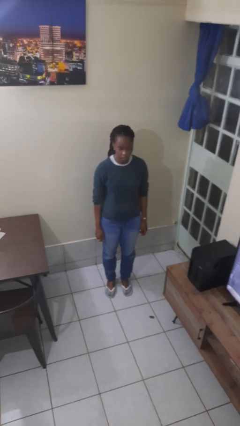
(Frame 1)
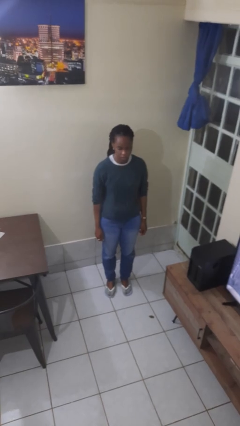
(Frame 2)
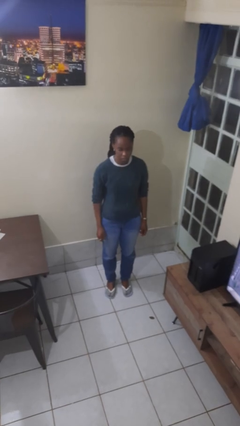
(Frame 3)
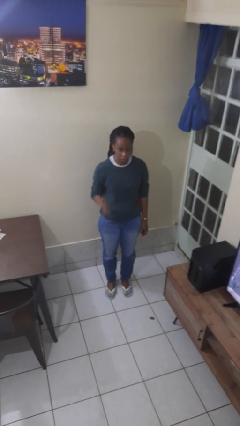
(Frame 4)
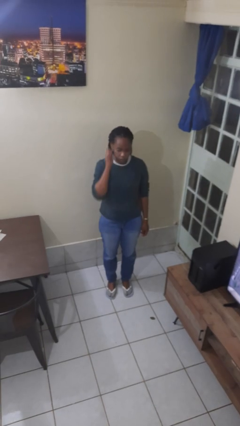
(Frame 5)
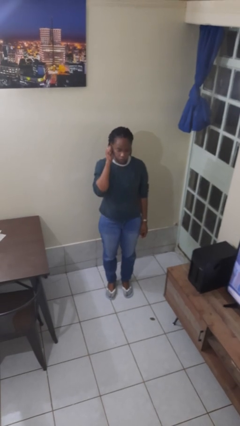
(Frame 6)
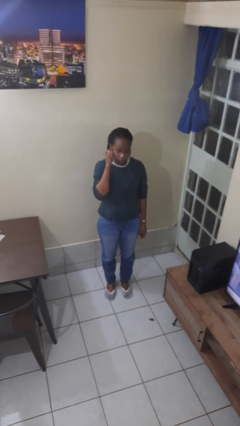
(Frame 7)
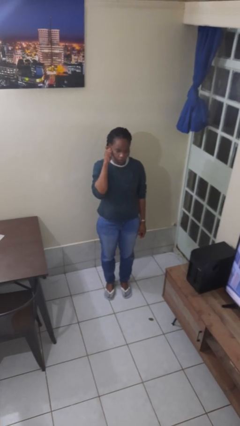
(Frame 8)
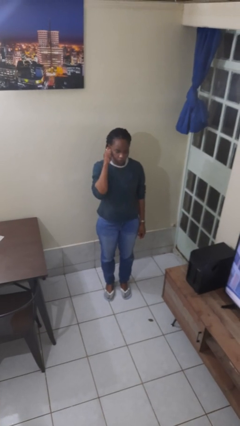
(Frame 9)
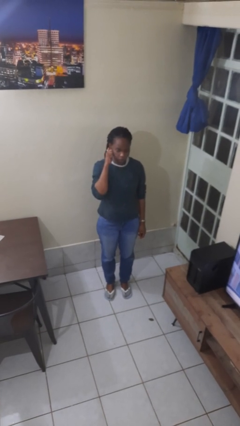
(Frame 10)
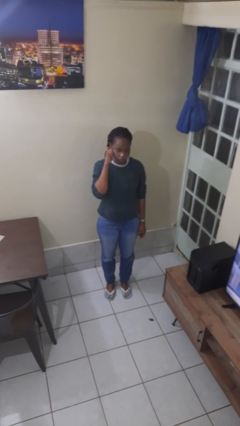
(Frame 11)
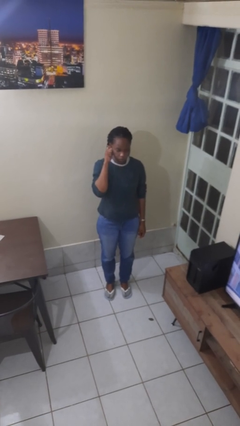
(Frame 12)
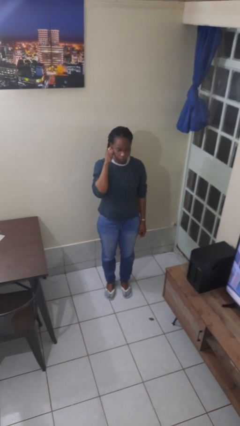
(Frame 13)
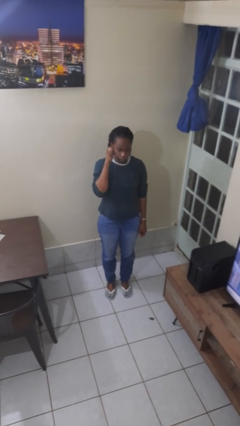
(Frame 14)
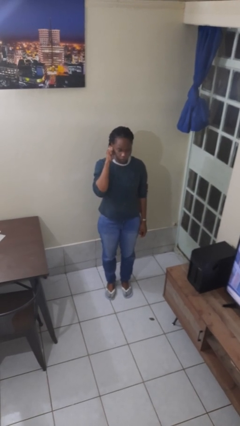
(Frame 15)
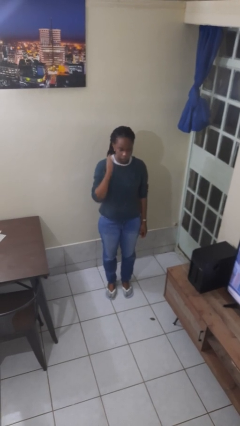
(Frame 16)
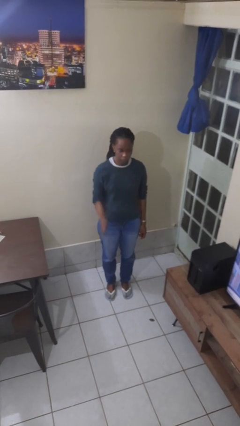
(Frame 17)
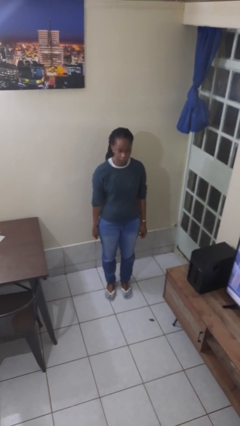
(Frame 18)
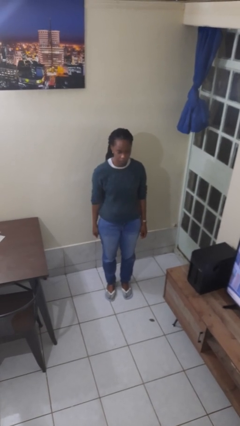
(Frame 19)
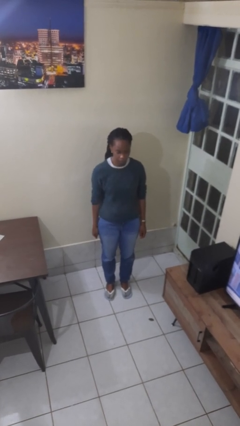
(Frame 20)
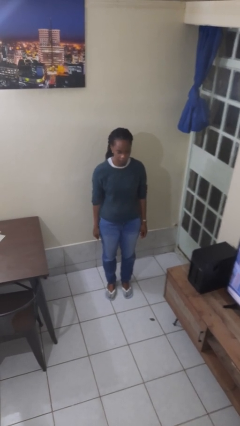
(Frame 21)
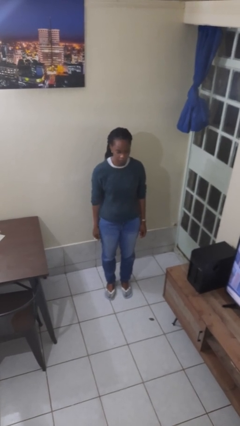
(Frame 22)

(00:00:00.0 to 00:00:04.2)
person touches earlobe

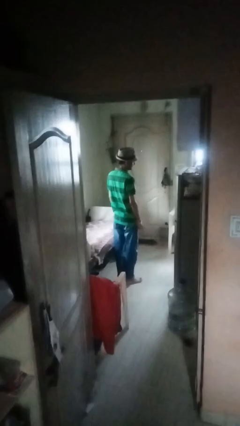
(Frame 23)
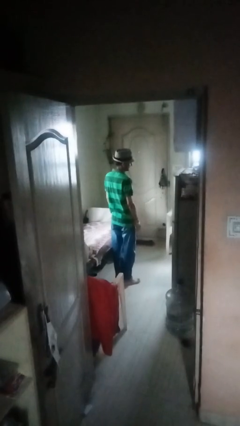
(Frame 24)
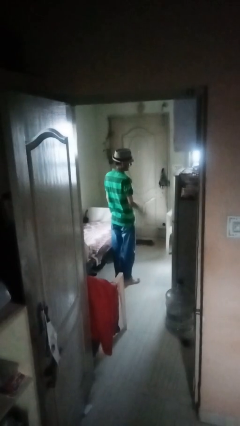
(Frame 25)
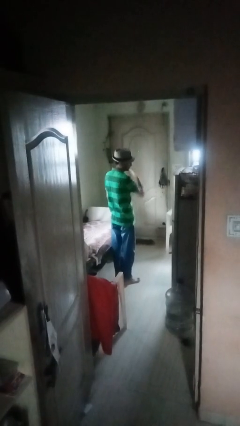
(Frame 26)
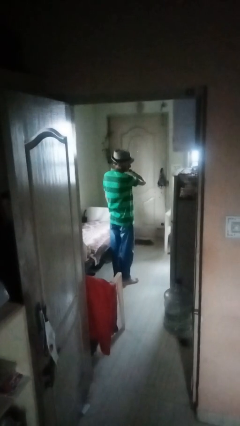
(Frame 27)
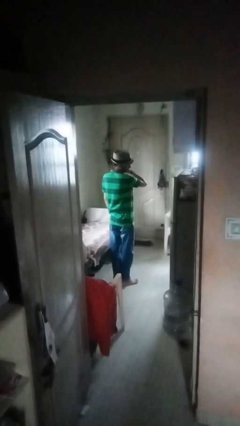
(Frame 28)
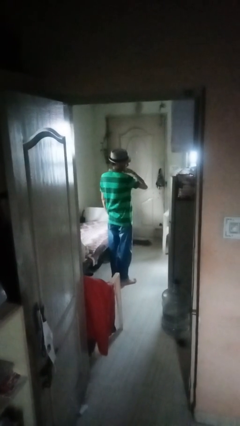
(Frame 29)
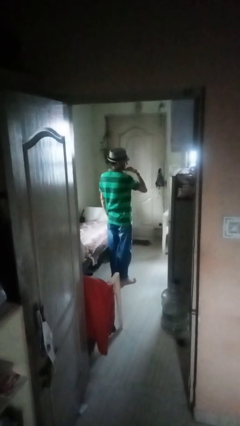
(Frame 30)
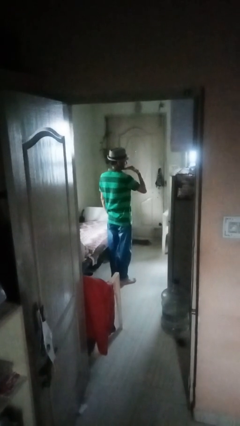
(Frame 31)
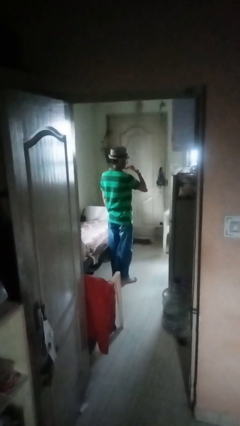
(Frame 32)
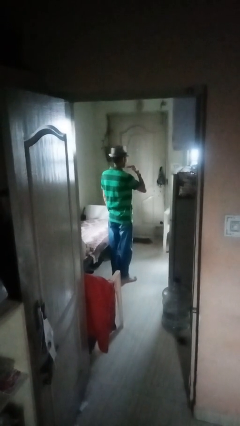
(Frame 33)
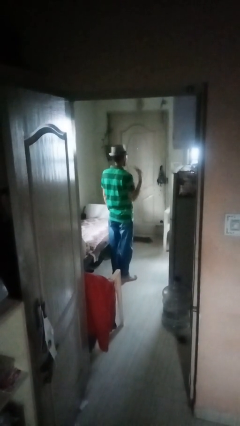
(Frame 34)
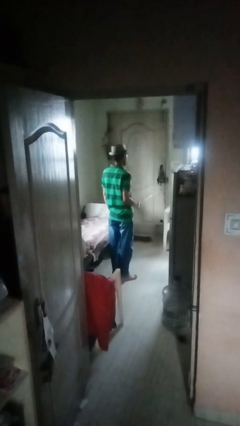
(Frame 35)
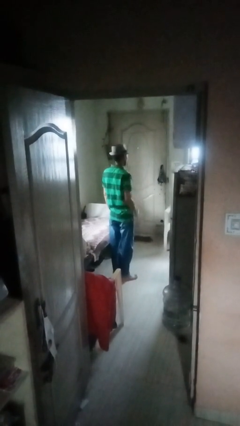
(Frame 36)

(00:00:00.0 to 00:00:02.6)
person gestures cut

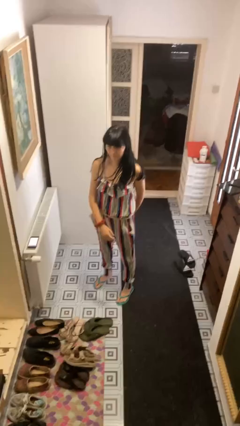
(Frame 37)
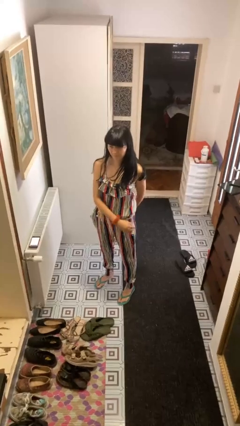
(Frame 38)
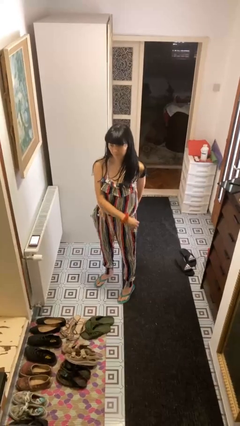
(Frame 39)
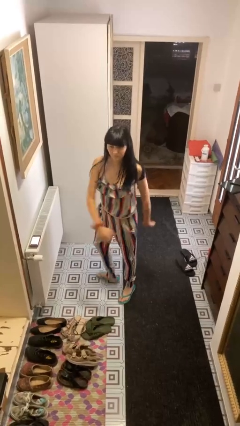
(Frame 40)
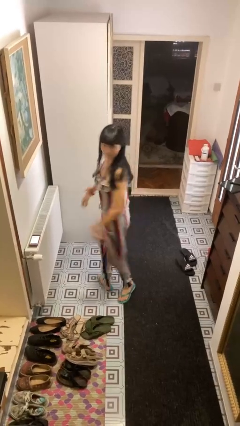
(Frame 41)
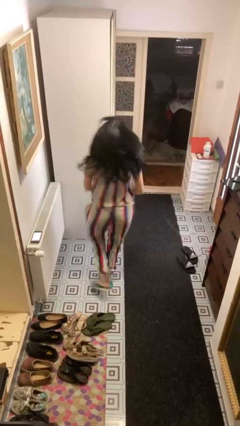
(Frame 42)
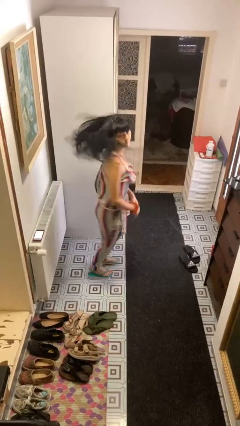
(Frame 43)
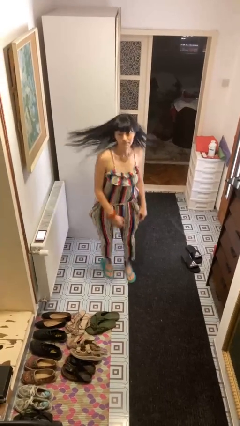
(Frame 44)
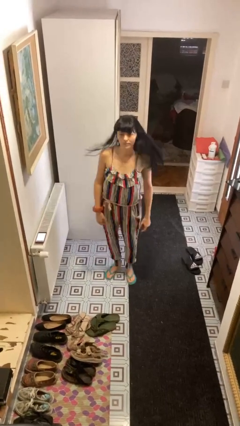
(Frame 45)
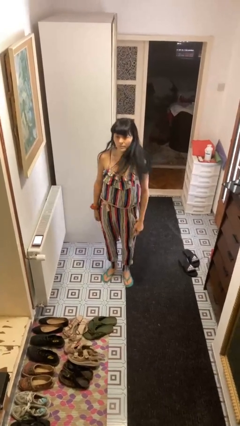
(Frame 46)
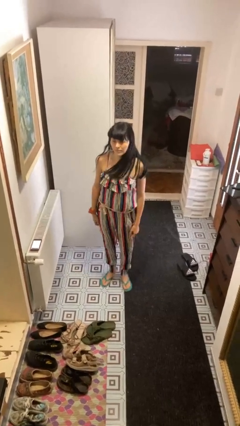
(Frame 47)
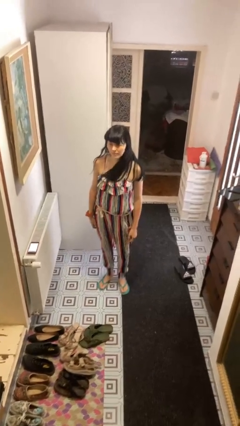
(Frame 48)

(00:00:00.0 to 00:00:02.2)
person twirls

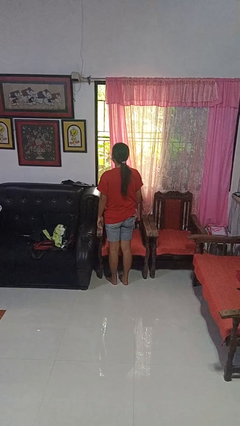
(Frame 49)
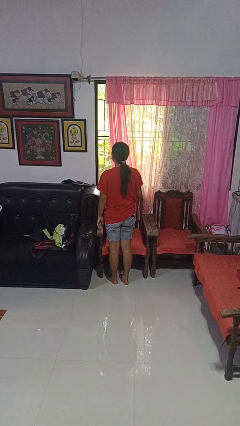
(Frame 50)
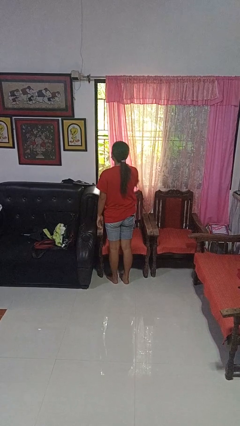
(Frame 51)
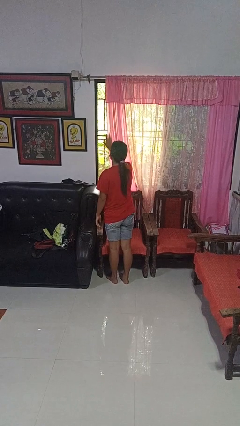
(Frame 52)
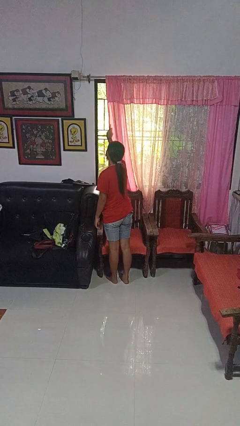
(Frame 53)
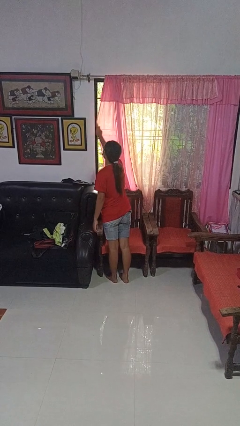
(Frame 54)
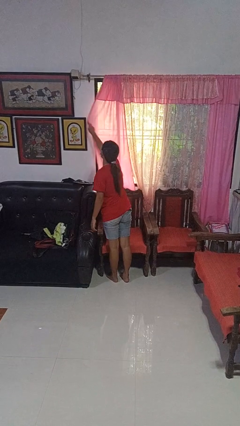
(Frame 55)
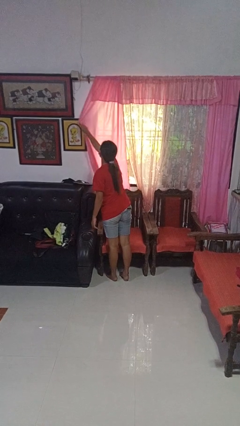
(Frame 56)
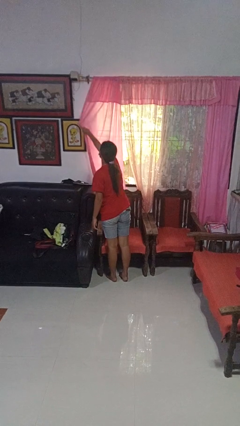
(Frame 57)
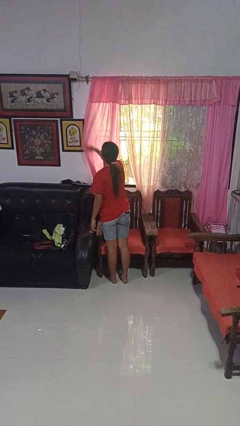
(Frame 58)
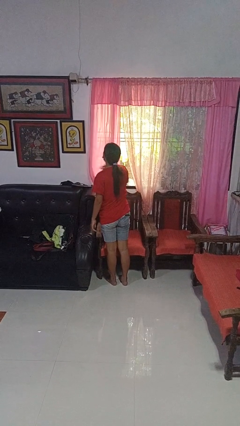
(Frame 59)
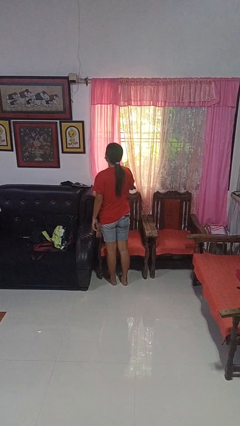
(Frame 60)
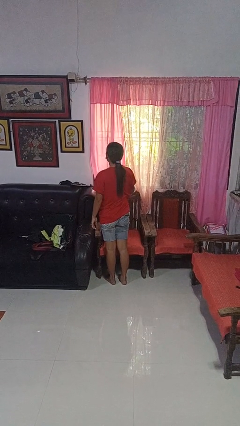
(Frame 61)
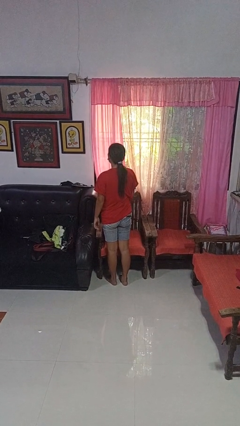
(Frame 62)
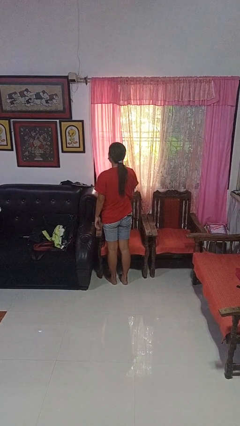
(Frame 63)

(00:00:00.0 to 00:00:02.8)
person closes curtains

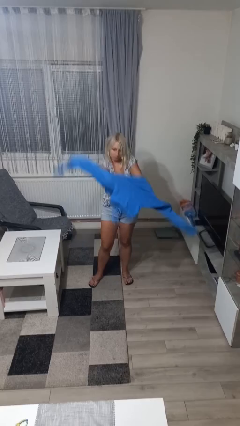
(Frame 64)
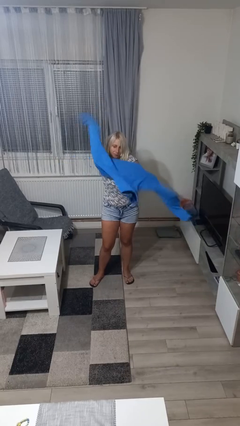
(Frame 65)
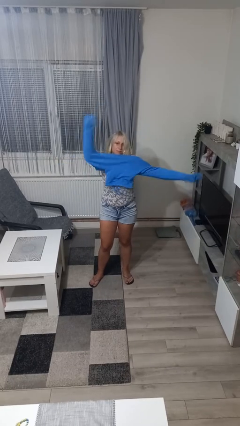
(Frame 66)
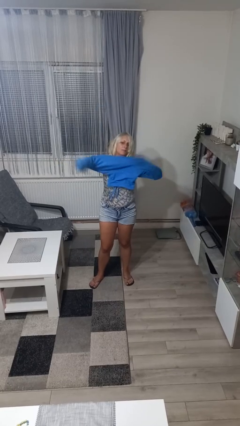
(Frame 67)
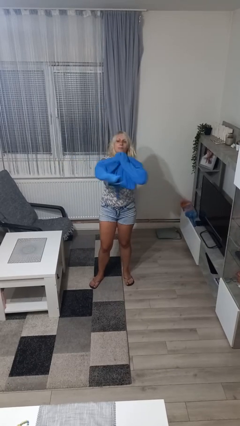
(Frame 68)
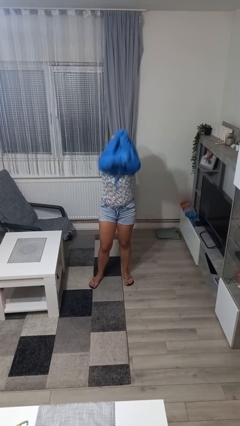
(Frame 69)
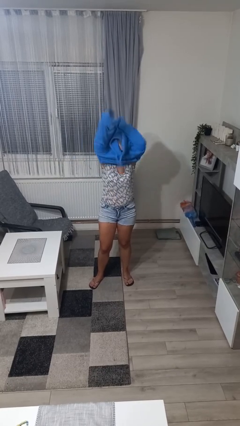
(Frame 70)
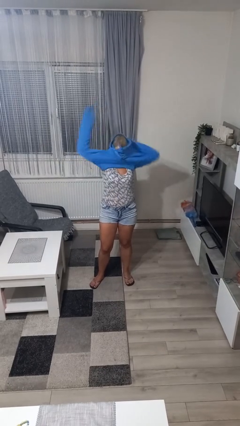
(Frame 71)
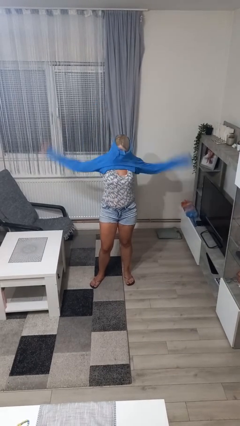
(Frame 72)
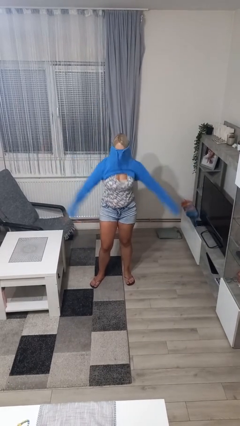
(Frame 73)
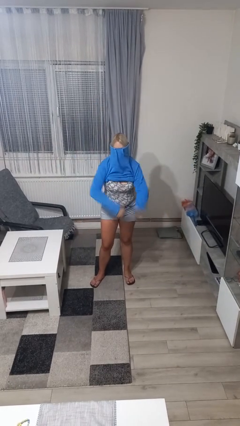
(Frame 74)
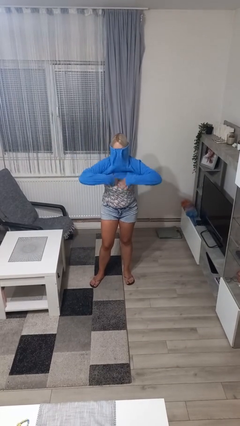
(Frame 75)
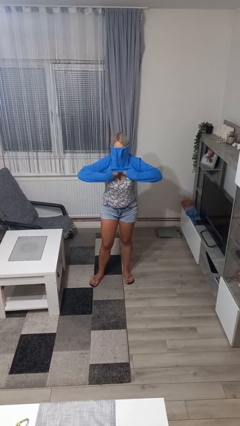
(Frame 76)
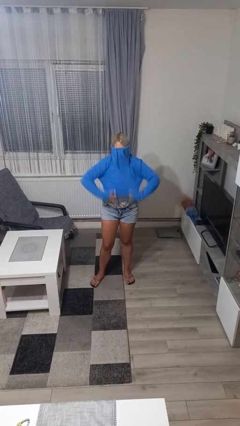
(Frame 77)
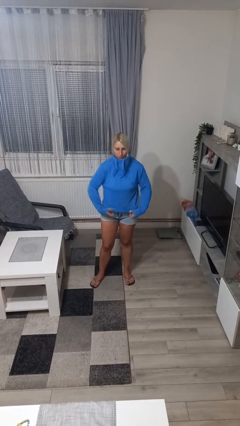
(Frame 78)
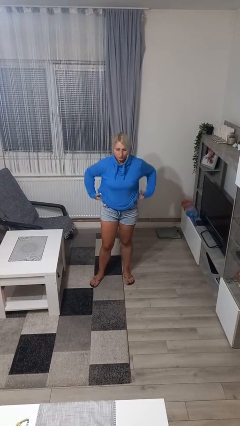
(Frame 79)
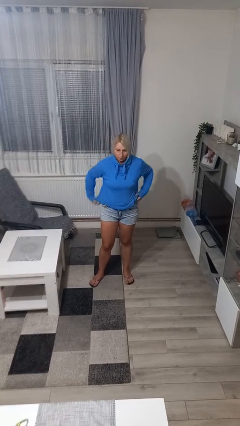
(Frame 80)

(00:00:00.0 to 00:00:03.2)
person puts on hoodie

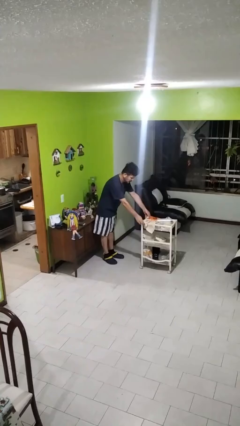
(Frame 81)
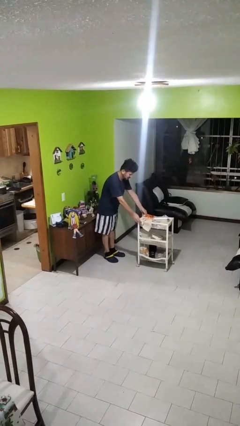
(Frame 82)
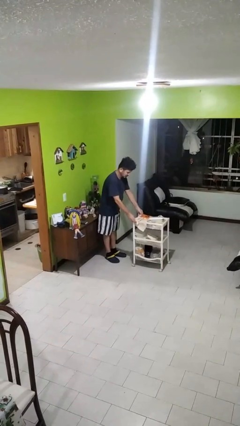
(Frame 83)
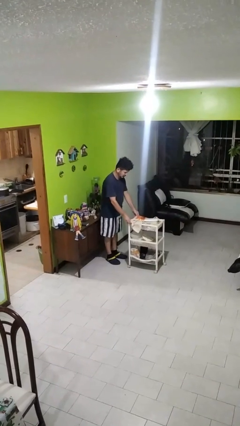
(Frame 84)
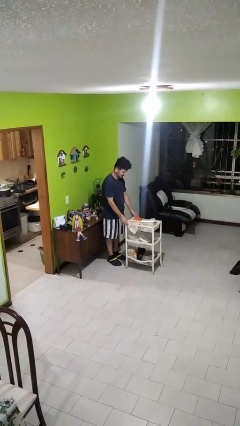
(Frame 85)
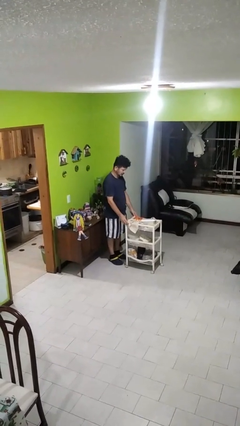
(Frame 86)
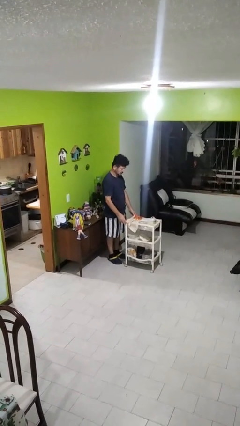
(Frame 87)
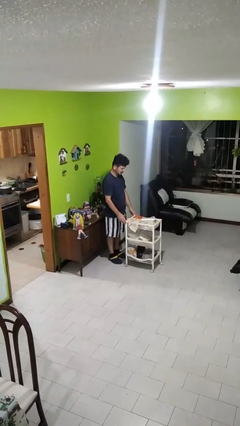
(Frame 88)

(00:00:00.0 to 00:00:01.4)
person pulls wheeled cart

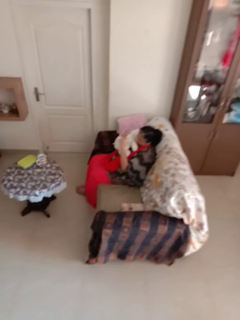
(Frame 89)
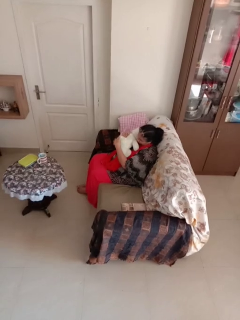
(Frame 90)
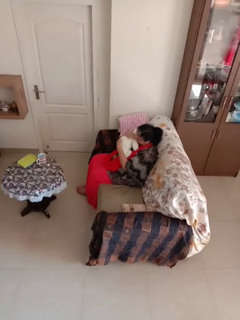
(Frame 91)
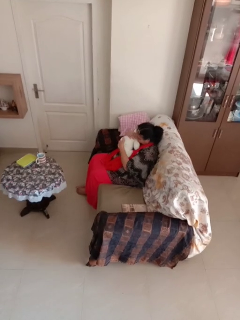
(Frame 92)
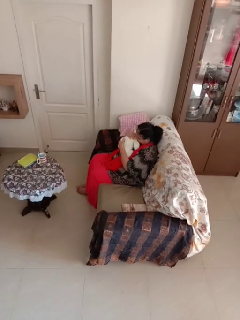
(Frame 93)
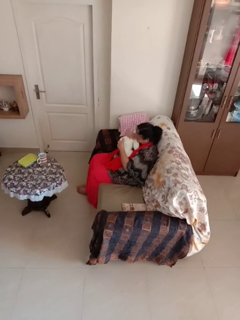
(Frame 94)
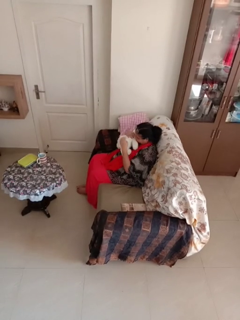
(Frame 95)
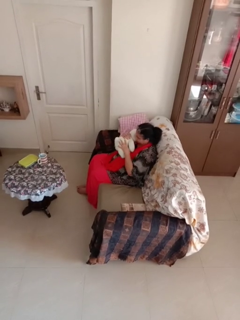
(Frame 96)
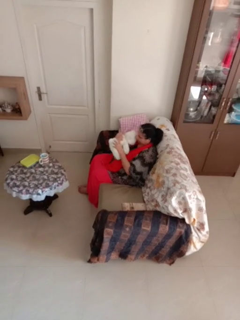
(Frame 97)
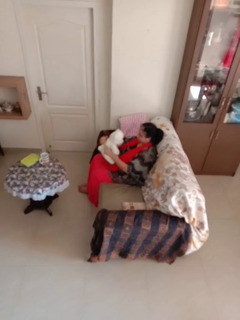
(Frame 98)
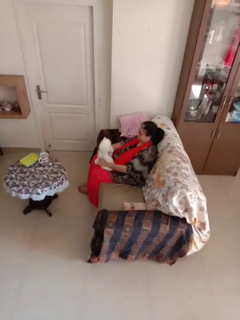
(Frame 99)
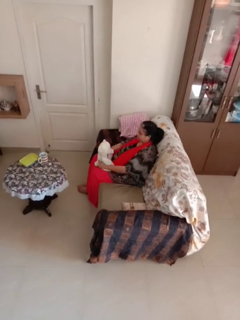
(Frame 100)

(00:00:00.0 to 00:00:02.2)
person hugs stuffed animal
